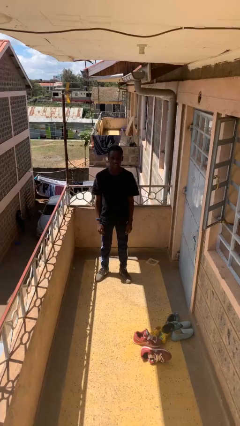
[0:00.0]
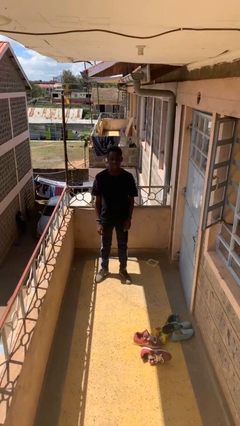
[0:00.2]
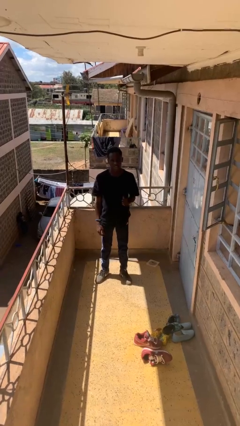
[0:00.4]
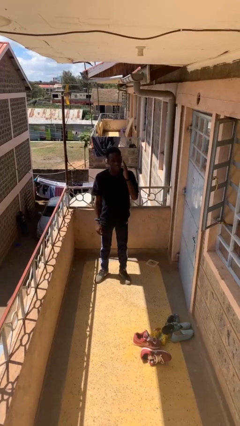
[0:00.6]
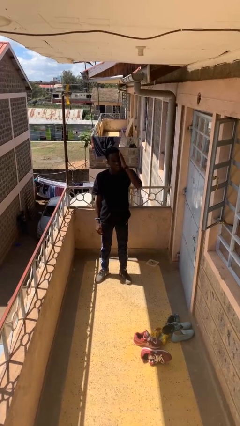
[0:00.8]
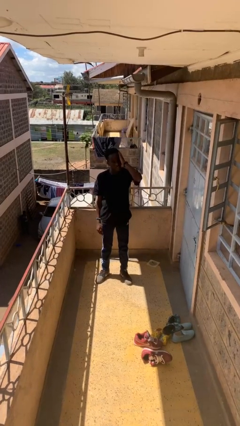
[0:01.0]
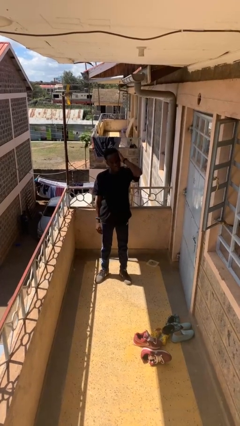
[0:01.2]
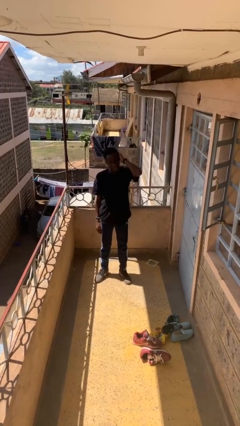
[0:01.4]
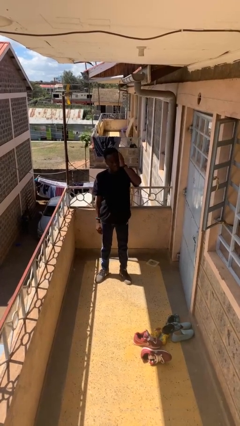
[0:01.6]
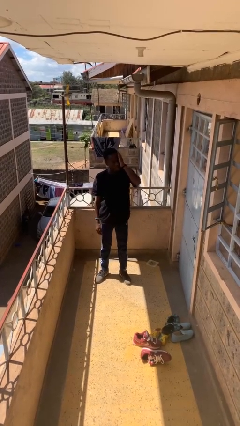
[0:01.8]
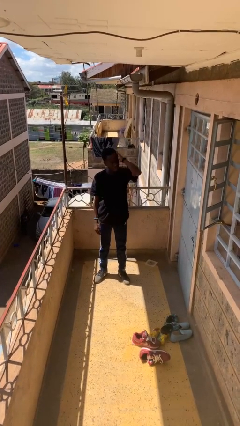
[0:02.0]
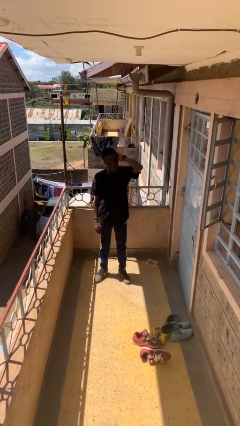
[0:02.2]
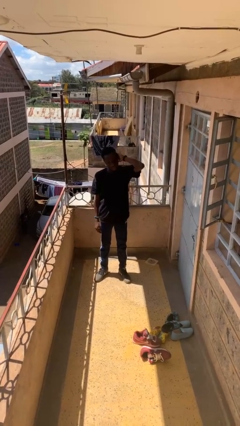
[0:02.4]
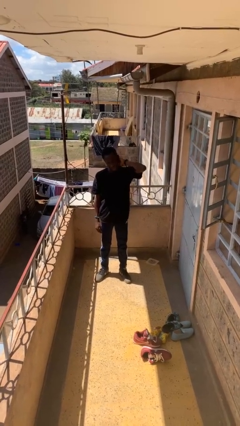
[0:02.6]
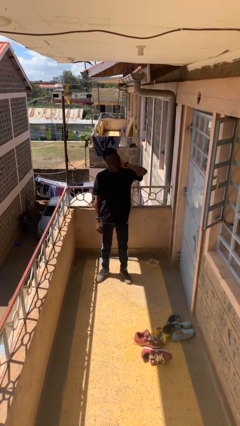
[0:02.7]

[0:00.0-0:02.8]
person strokes hair

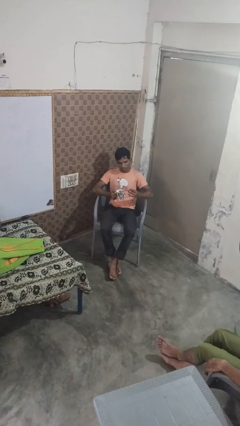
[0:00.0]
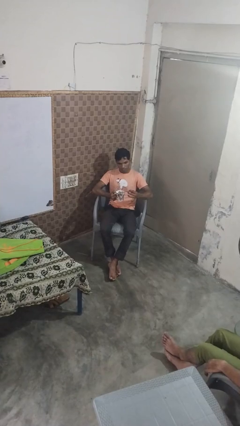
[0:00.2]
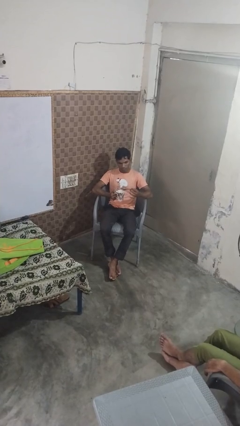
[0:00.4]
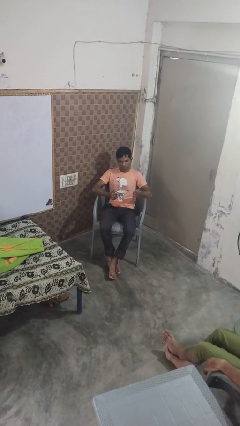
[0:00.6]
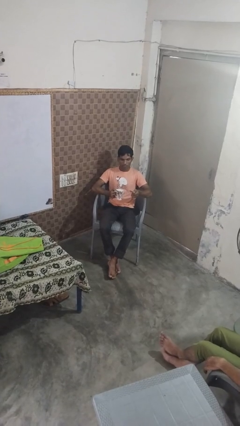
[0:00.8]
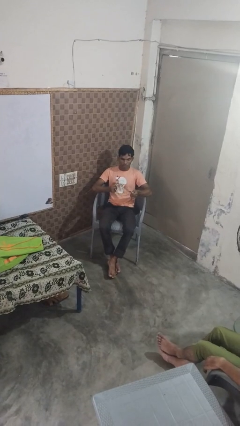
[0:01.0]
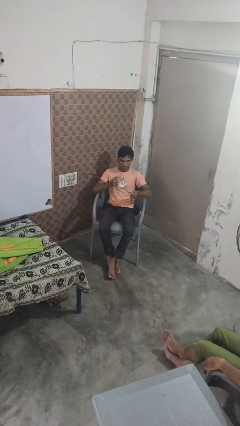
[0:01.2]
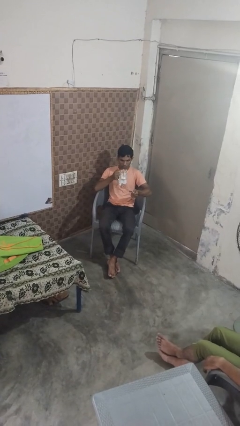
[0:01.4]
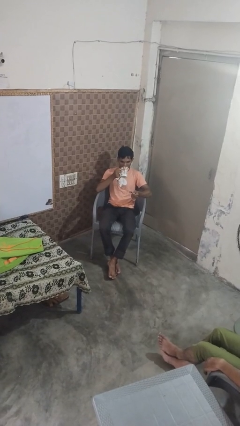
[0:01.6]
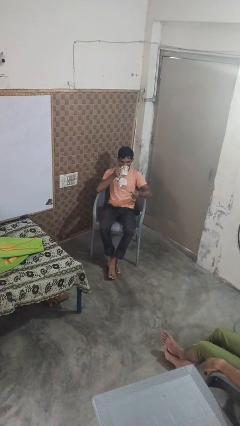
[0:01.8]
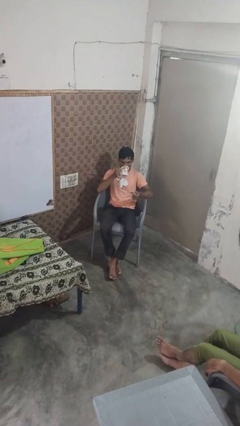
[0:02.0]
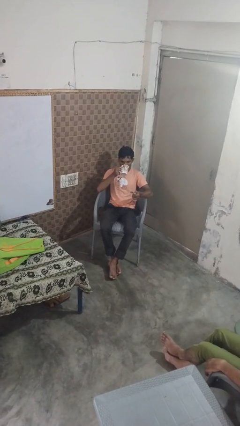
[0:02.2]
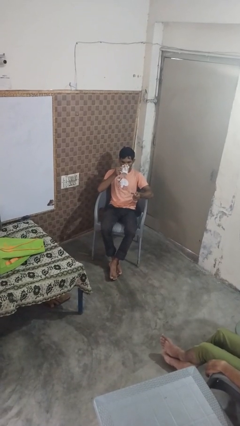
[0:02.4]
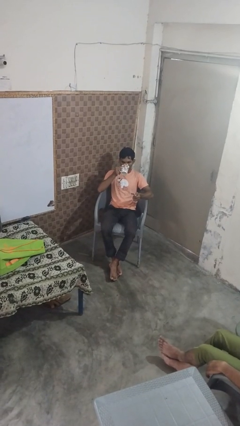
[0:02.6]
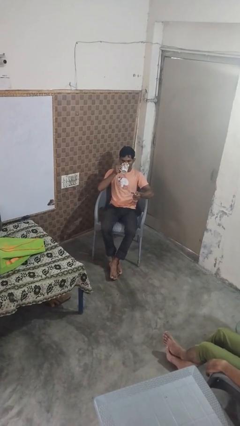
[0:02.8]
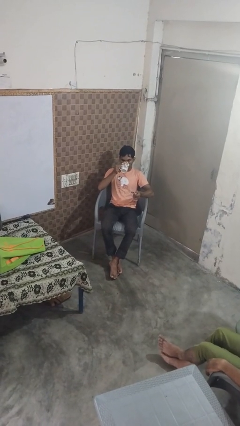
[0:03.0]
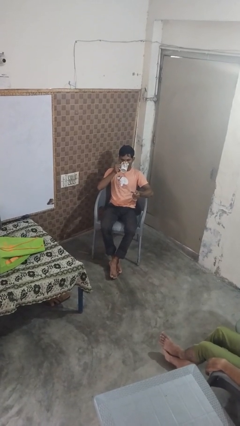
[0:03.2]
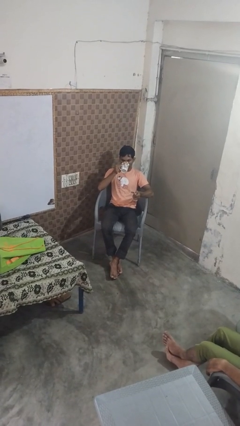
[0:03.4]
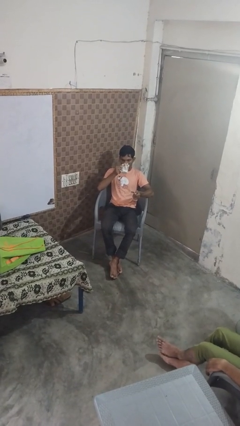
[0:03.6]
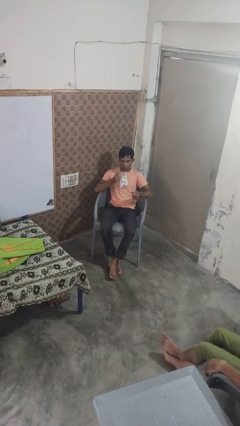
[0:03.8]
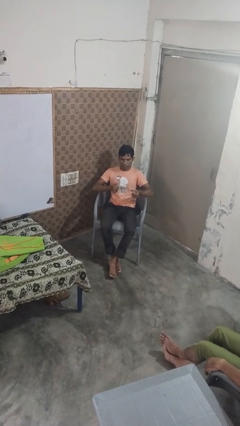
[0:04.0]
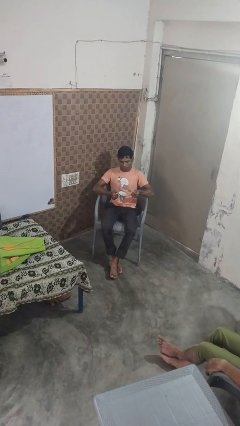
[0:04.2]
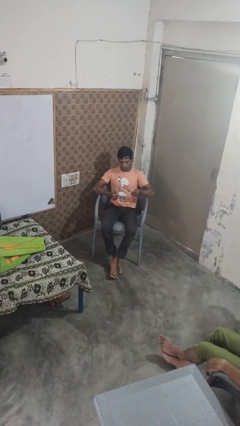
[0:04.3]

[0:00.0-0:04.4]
person drinks from mug

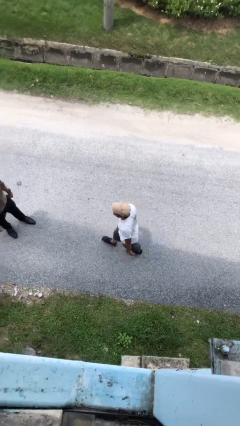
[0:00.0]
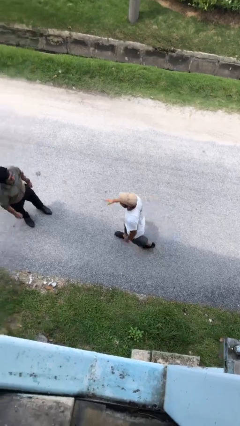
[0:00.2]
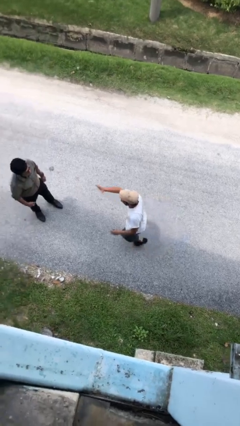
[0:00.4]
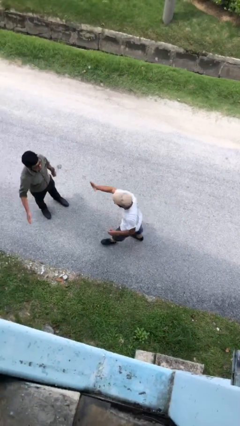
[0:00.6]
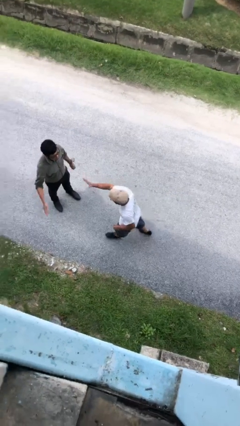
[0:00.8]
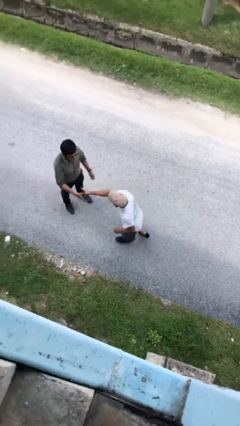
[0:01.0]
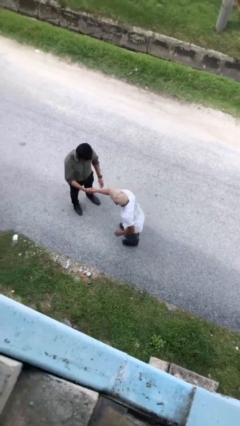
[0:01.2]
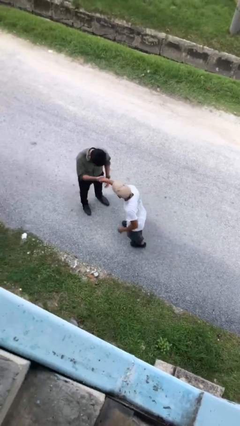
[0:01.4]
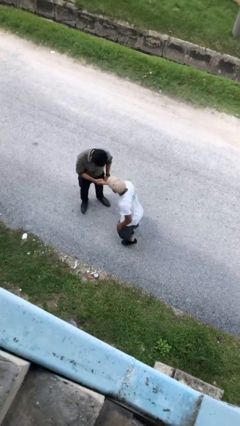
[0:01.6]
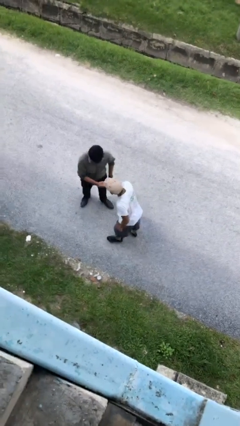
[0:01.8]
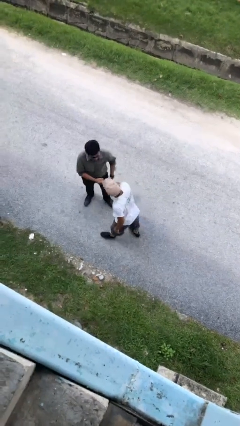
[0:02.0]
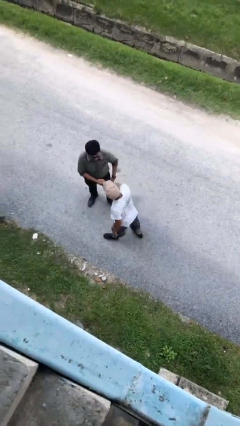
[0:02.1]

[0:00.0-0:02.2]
person shakes hand

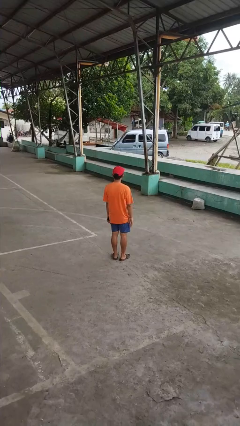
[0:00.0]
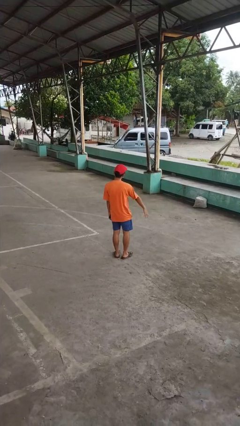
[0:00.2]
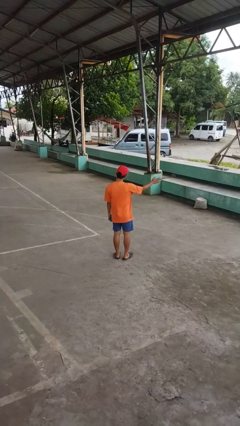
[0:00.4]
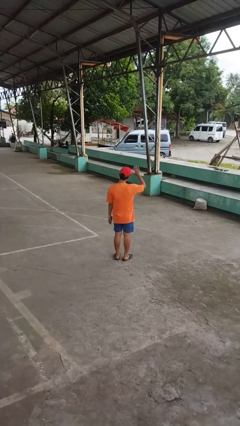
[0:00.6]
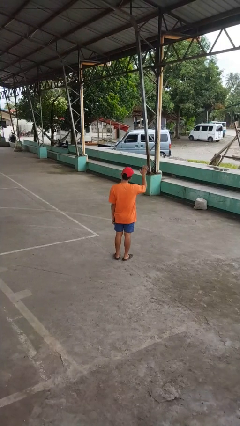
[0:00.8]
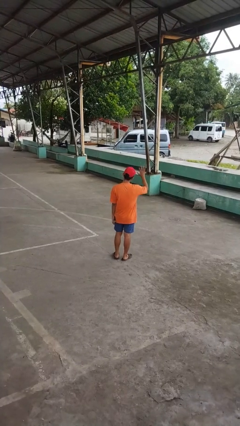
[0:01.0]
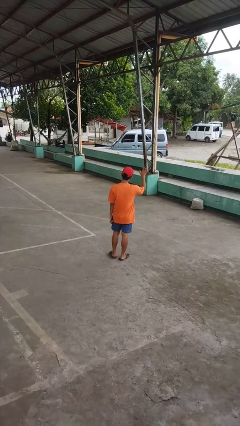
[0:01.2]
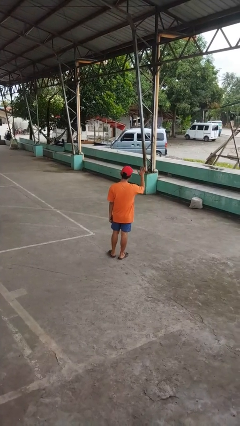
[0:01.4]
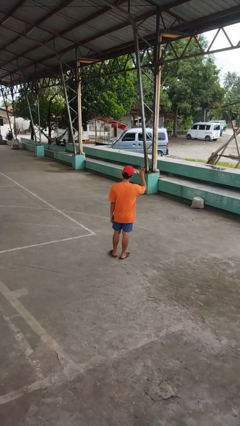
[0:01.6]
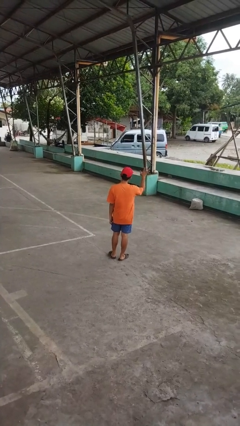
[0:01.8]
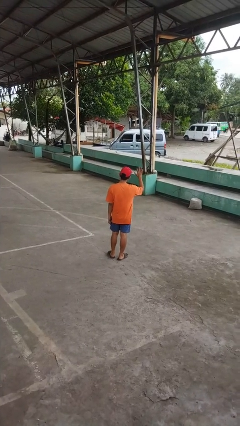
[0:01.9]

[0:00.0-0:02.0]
person waves at person

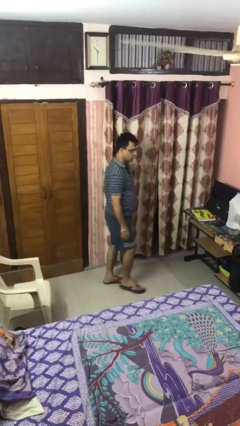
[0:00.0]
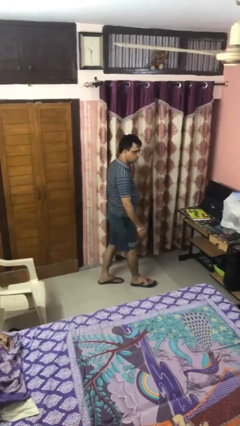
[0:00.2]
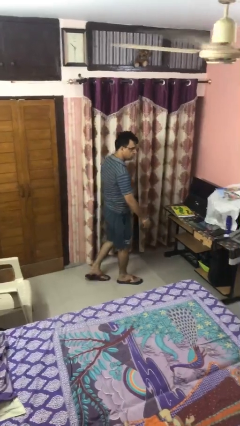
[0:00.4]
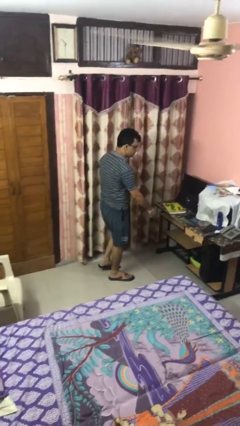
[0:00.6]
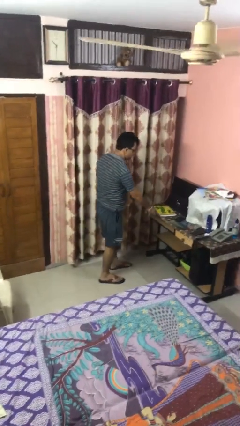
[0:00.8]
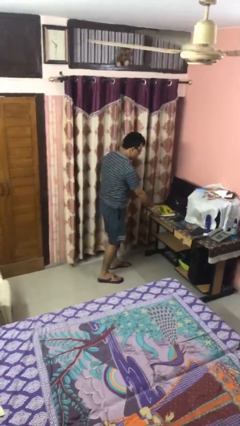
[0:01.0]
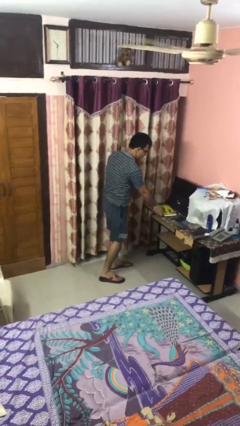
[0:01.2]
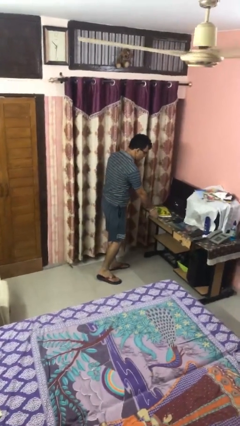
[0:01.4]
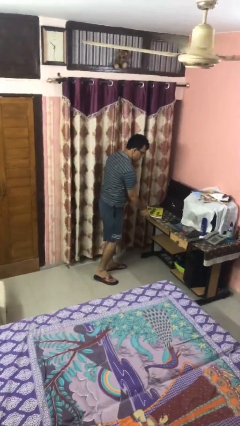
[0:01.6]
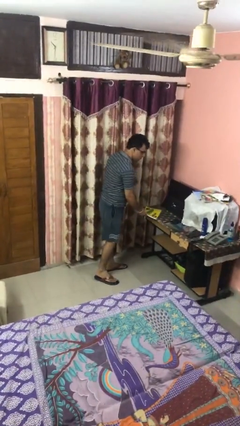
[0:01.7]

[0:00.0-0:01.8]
person picks up object from table

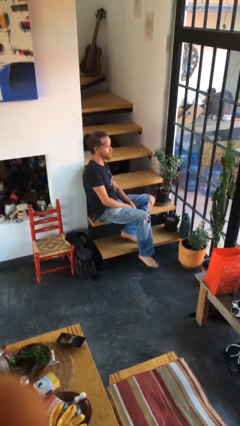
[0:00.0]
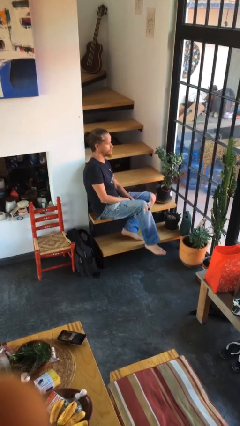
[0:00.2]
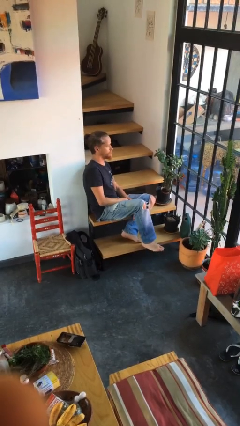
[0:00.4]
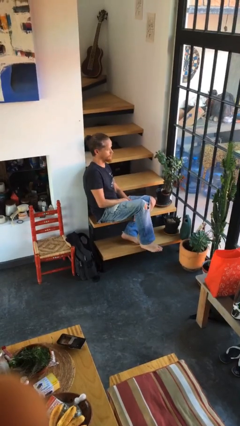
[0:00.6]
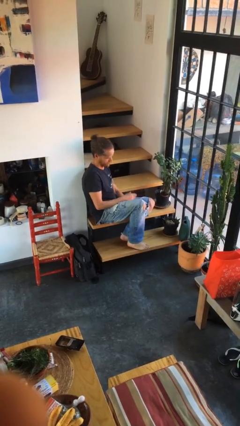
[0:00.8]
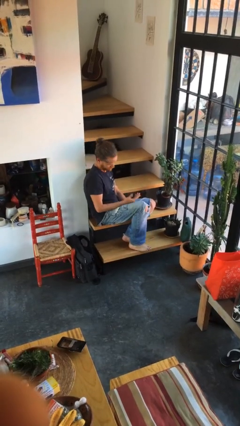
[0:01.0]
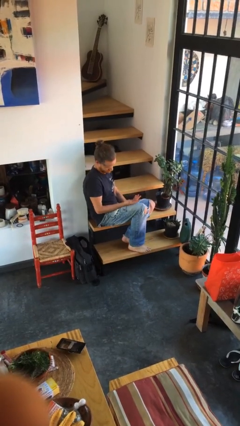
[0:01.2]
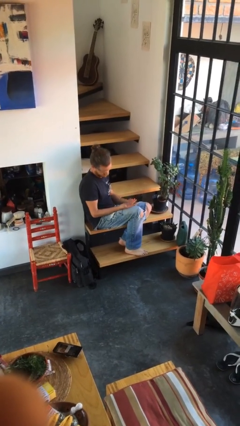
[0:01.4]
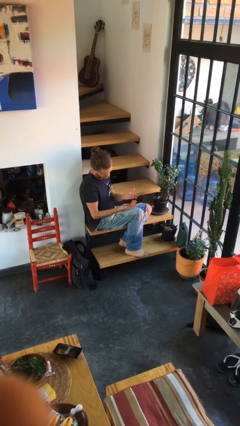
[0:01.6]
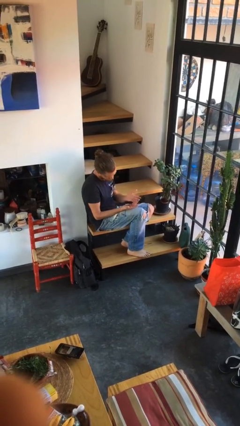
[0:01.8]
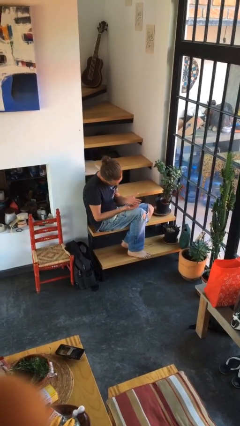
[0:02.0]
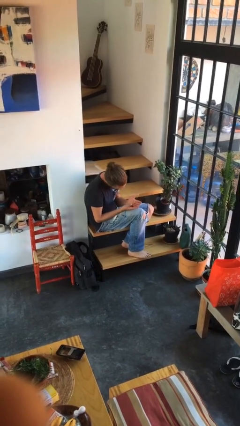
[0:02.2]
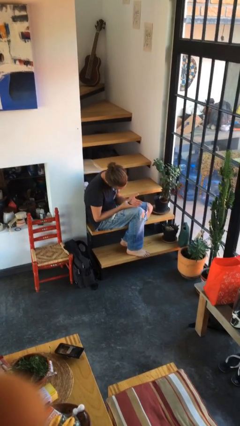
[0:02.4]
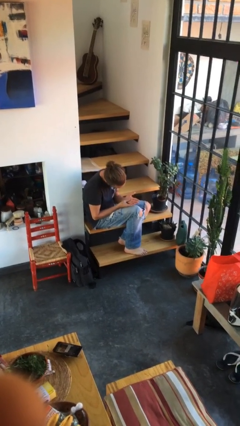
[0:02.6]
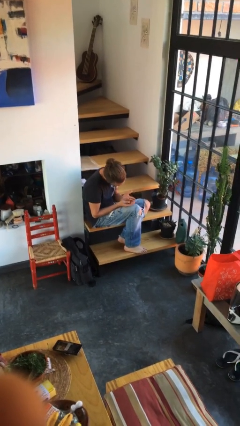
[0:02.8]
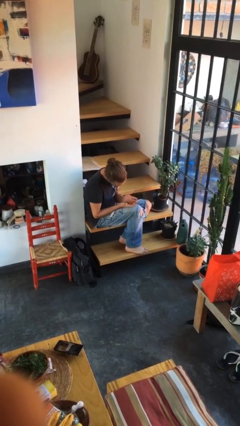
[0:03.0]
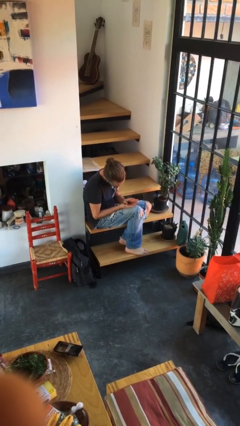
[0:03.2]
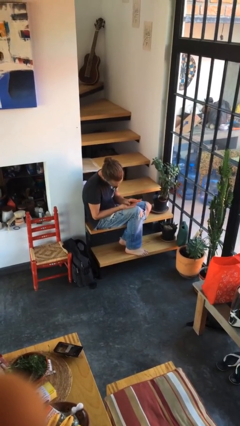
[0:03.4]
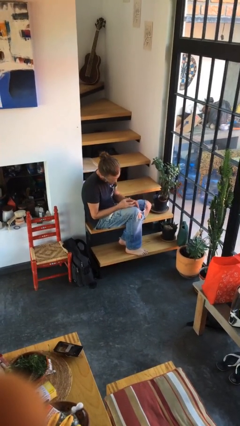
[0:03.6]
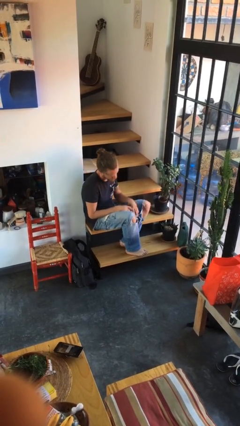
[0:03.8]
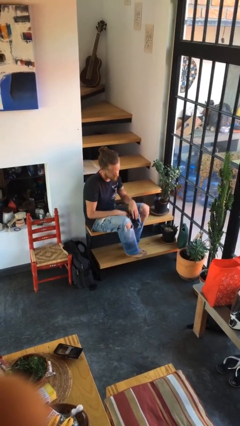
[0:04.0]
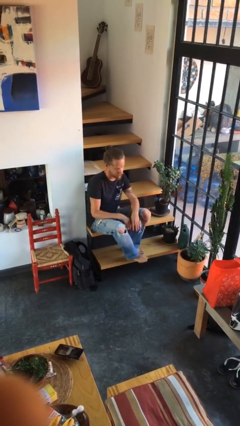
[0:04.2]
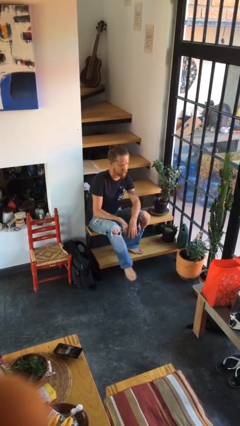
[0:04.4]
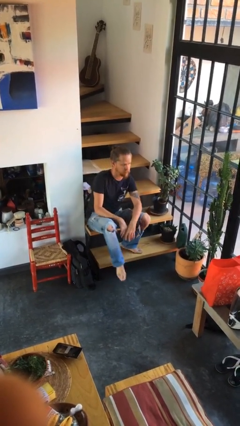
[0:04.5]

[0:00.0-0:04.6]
person looks at hands in lap
